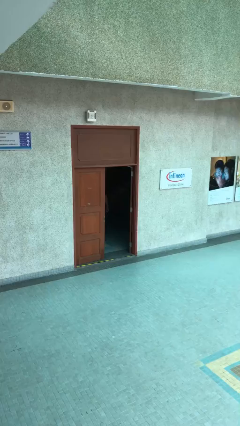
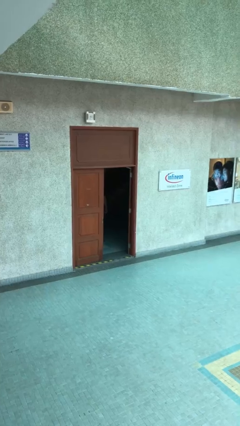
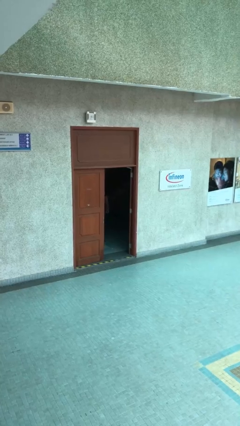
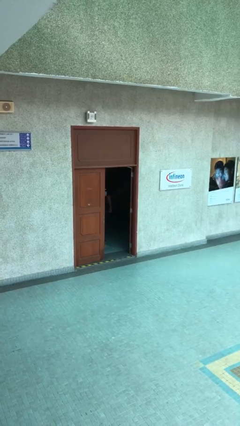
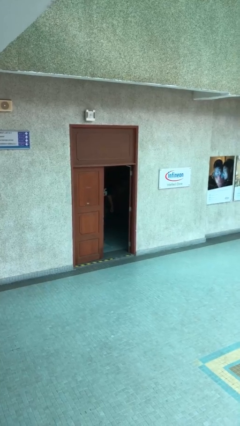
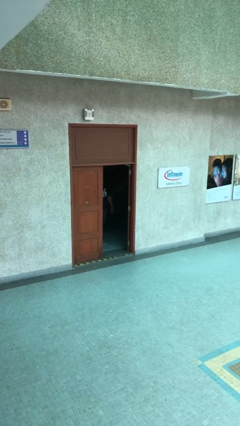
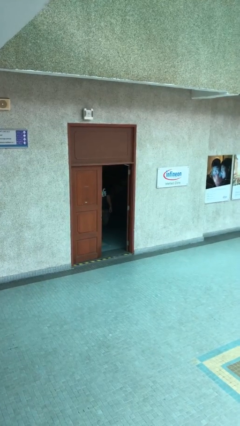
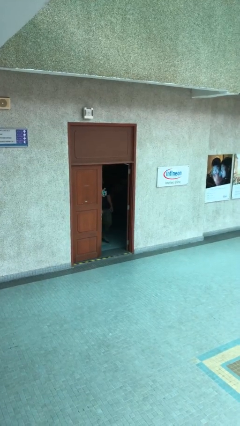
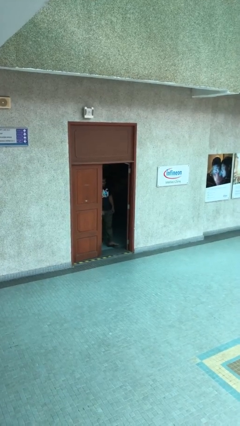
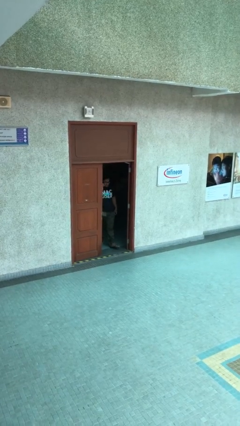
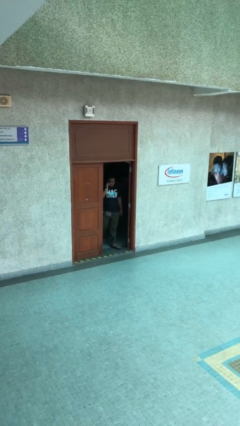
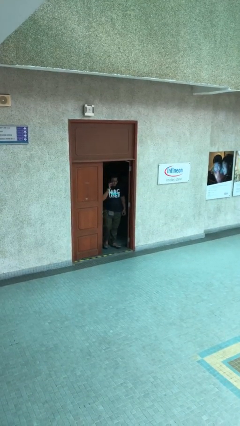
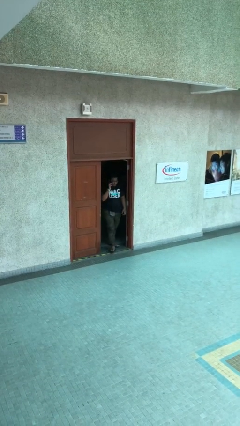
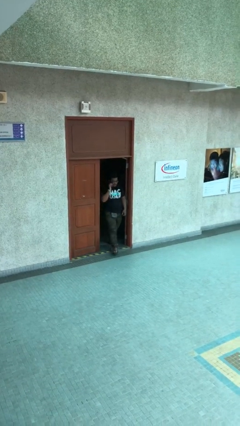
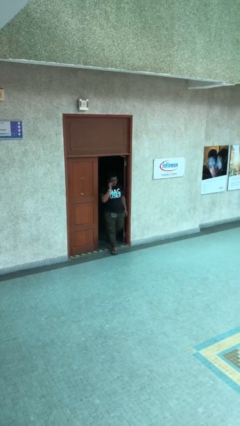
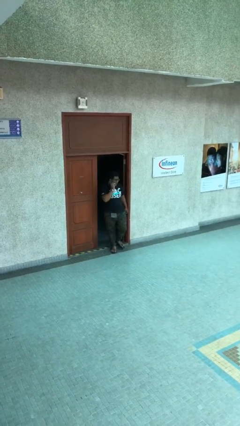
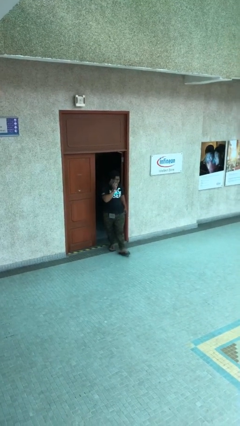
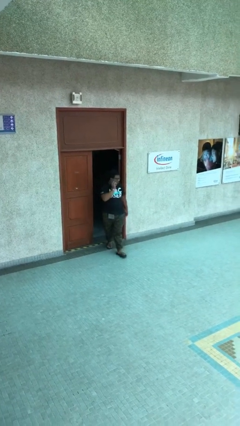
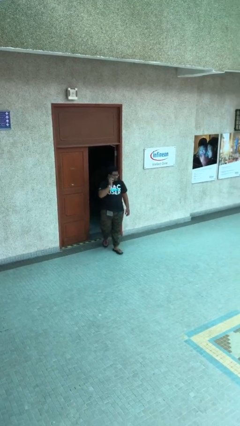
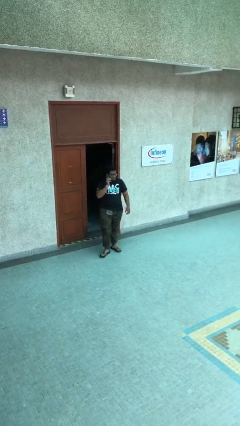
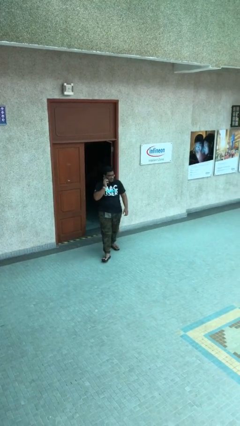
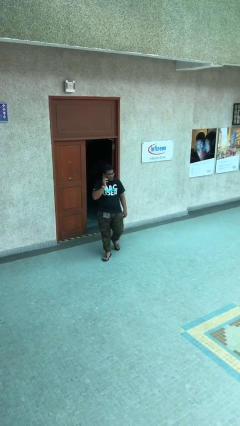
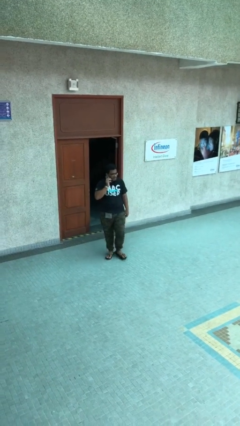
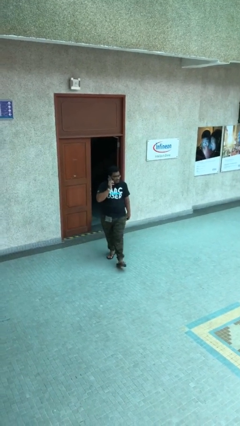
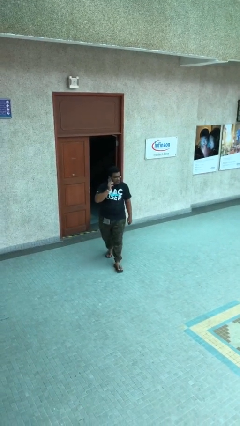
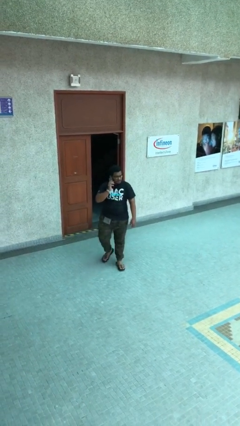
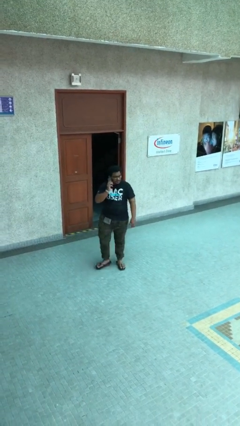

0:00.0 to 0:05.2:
person enters scene through structure

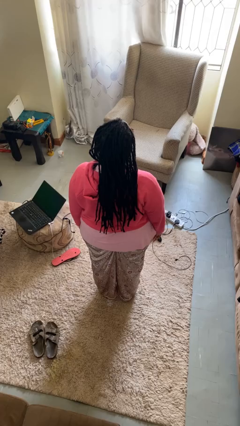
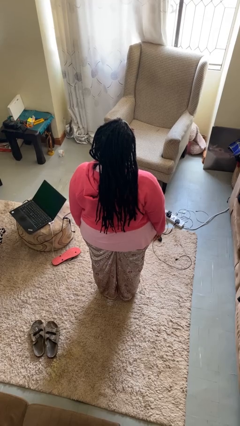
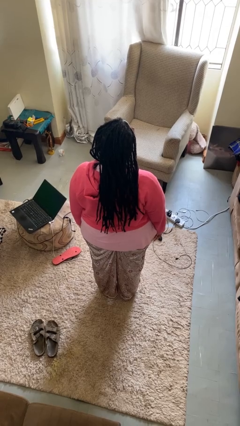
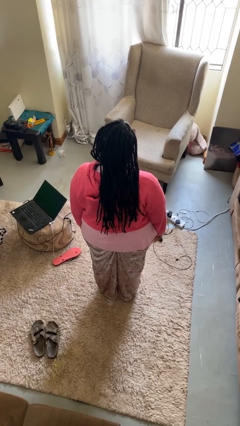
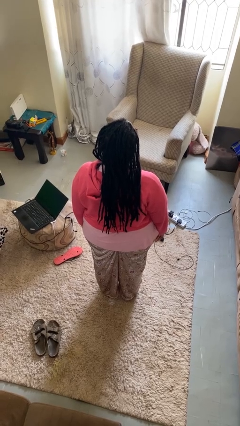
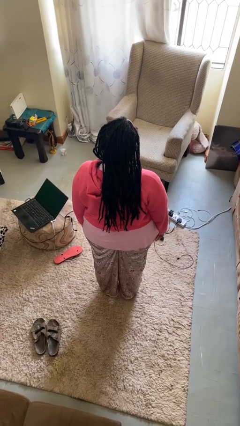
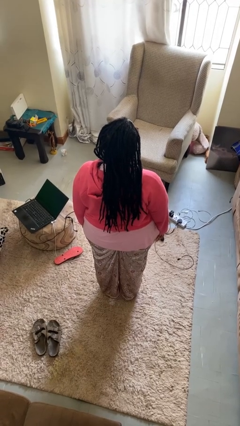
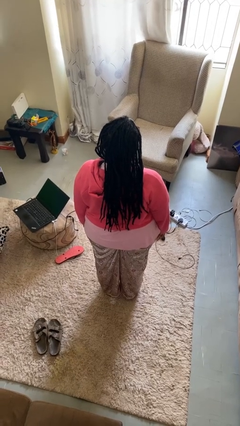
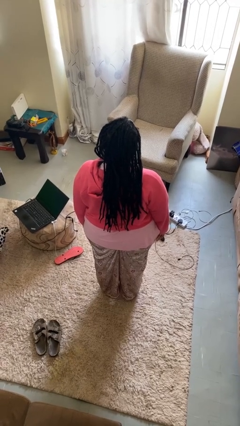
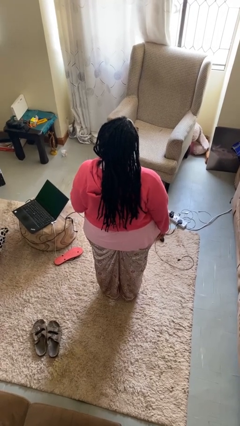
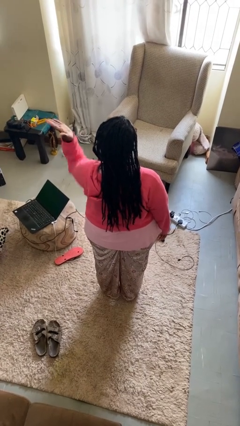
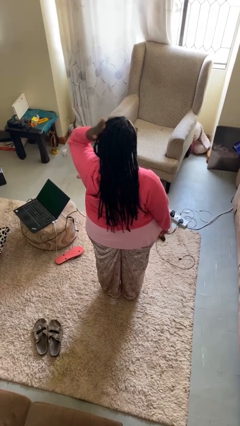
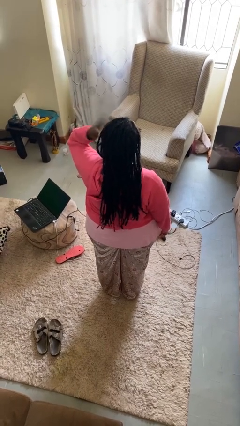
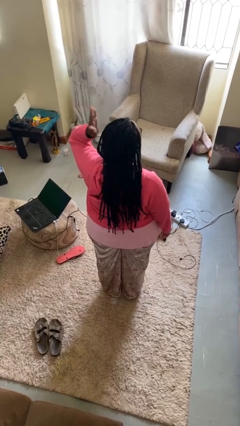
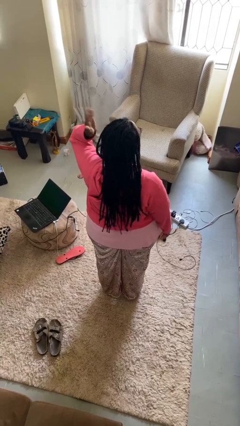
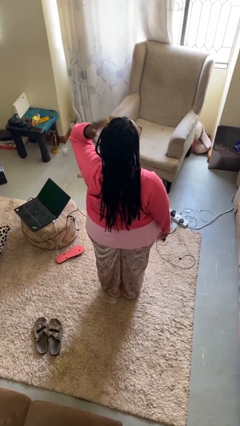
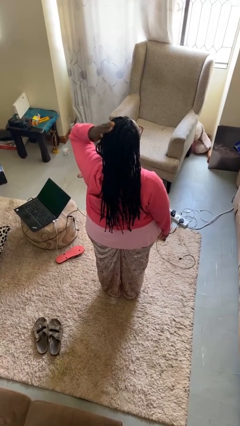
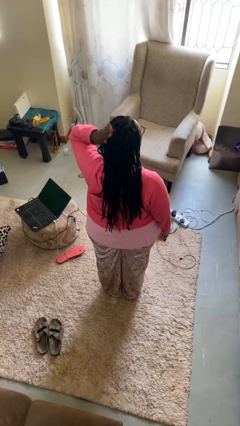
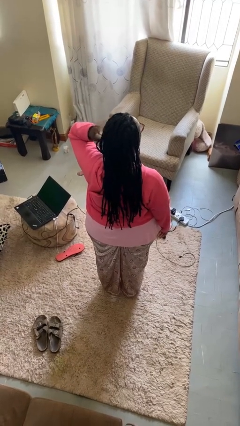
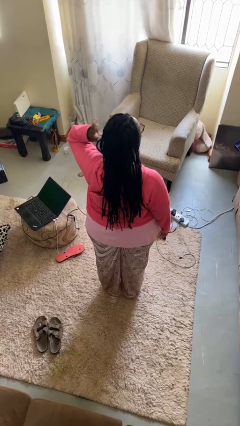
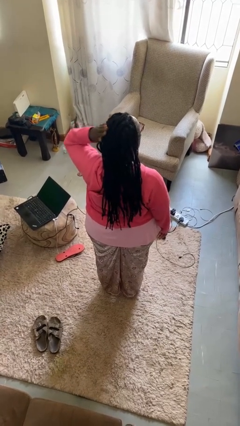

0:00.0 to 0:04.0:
person pats head

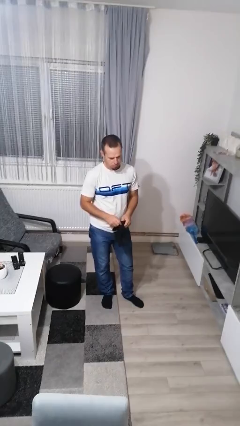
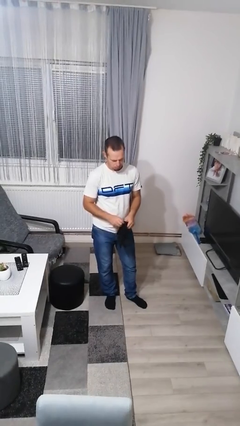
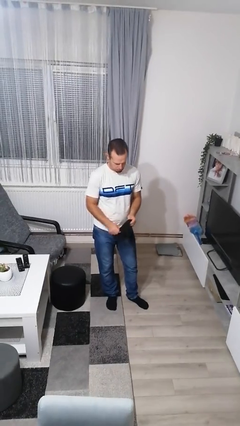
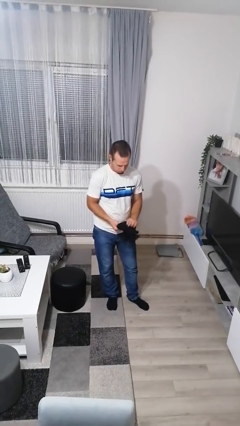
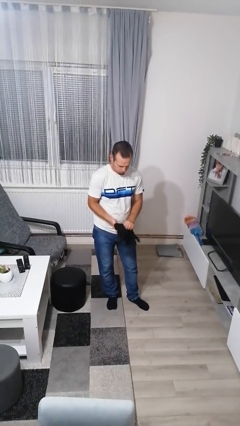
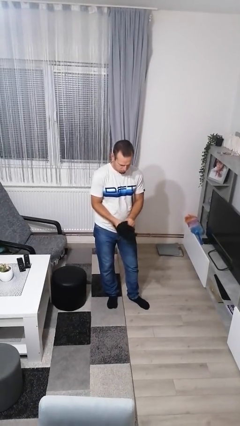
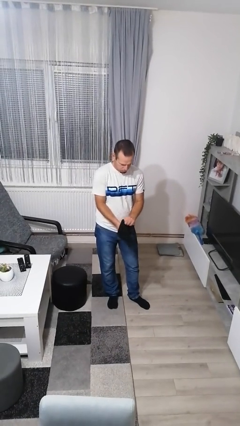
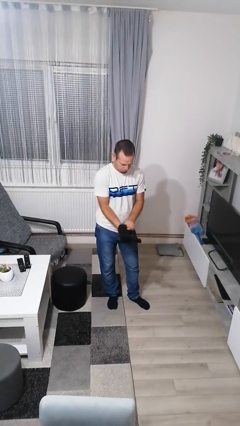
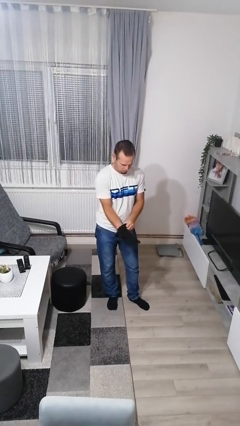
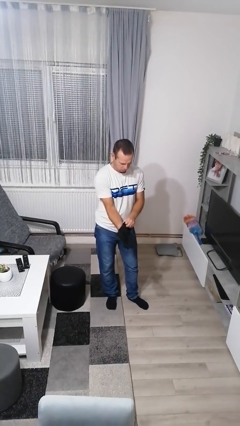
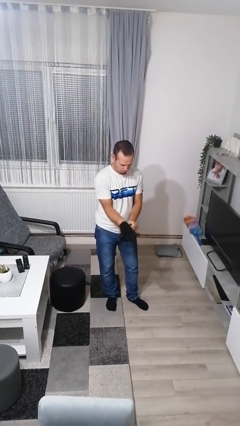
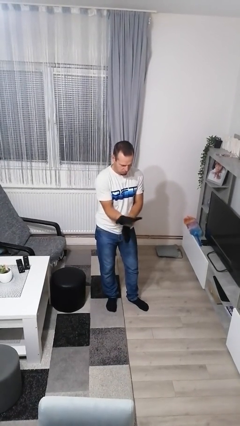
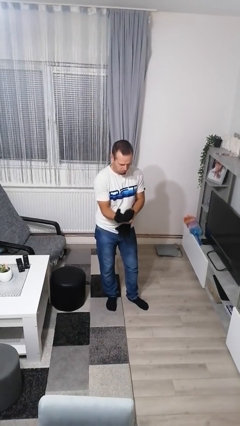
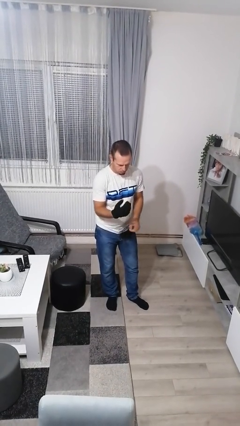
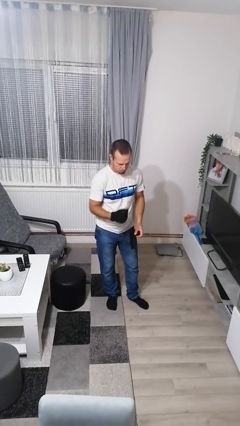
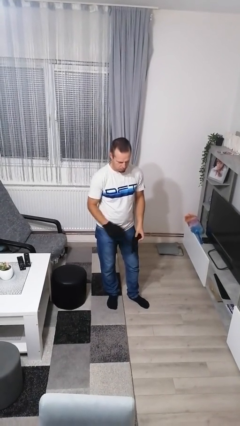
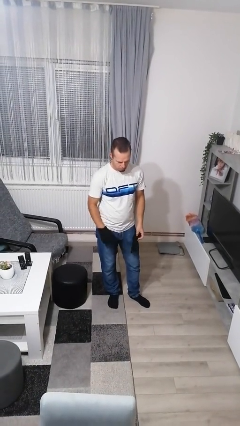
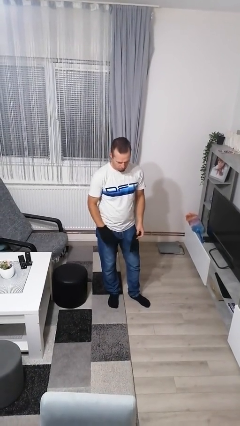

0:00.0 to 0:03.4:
person puts on gloves

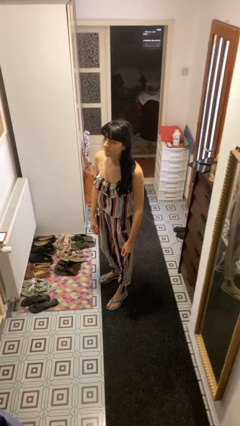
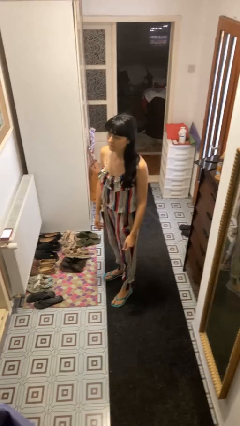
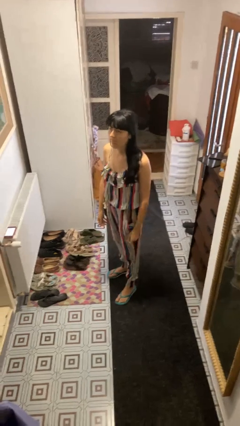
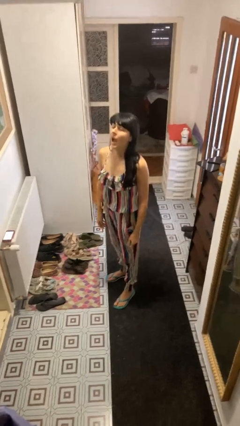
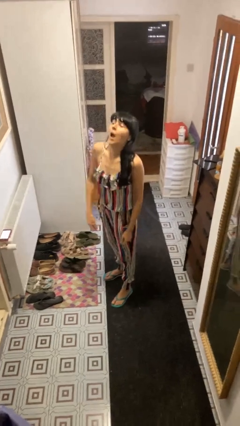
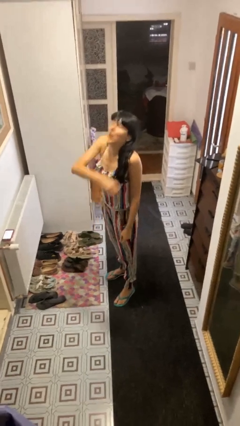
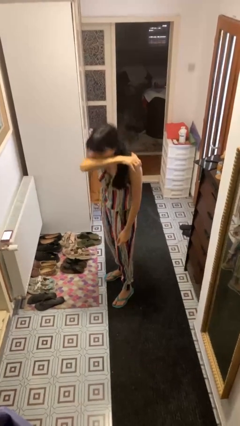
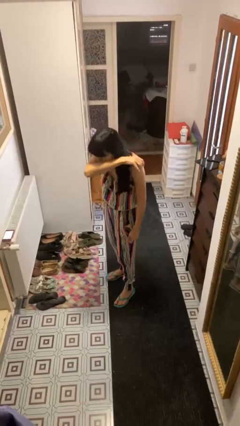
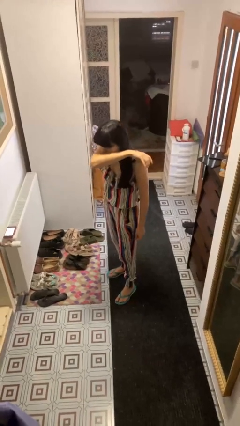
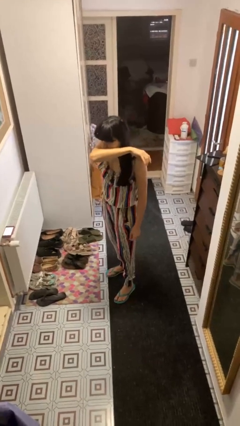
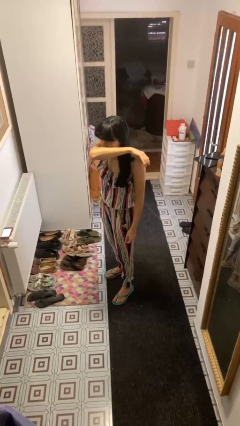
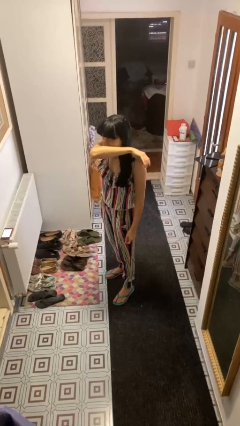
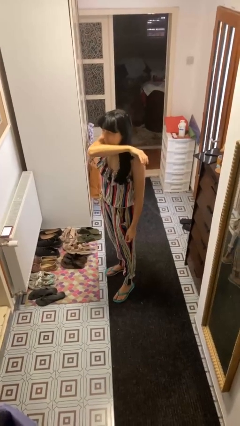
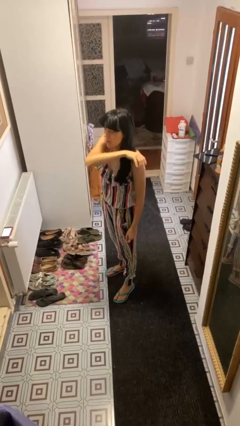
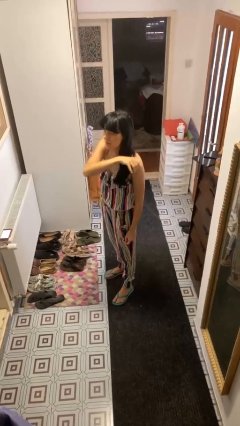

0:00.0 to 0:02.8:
person sneezes into arm

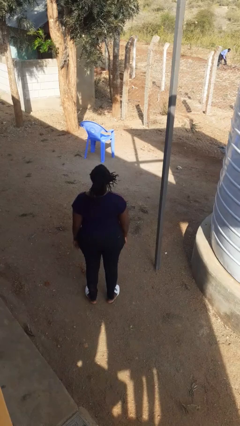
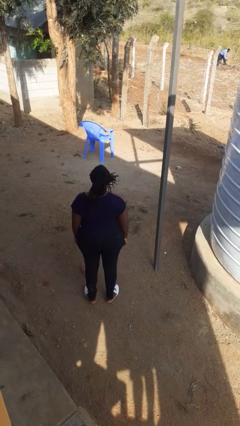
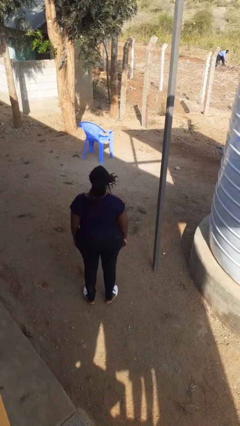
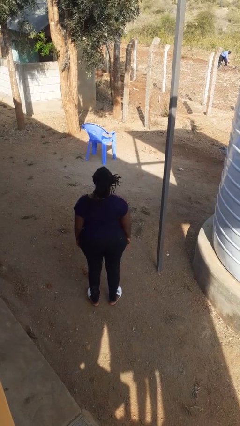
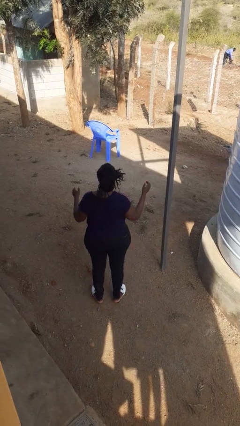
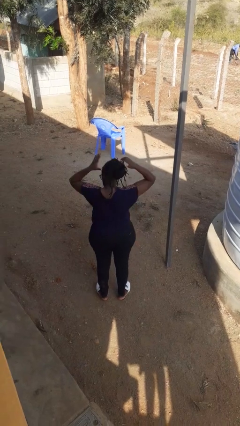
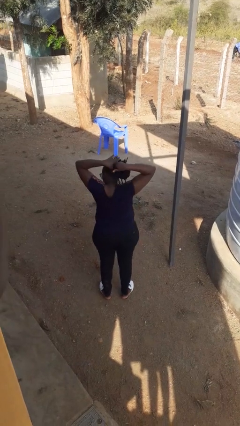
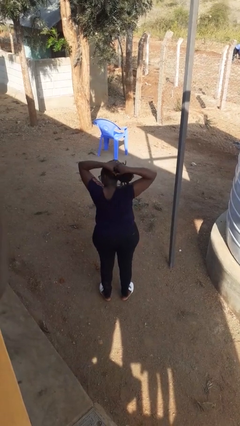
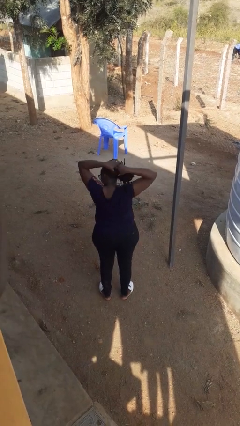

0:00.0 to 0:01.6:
person puts hair in ponytail

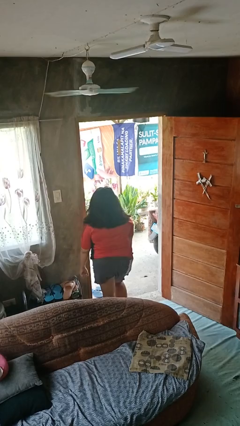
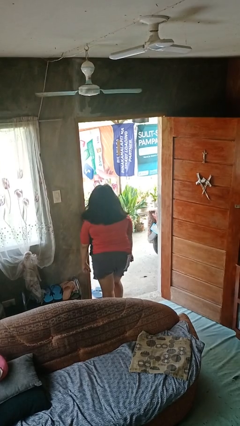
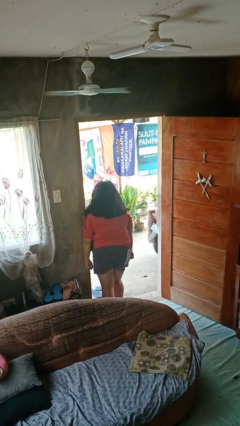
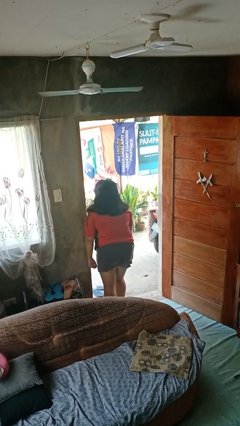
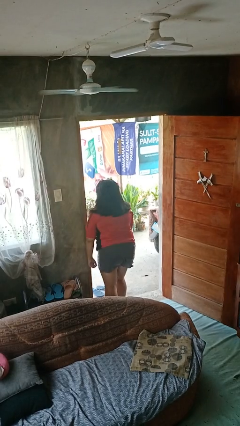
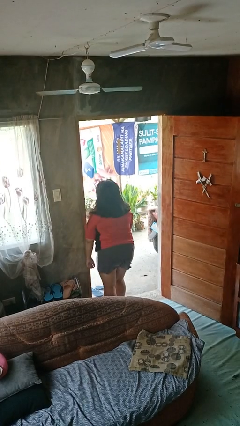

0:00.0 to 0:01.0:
person bumps into wall
